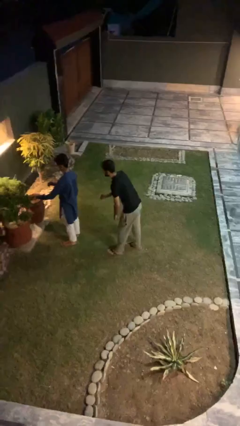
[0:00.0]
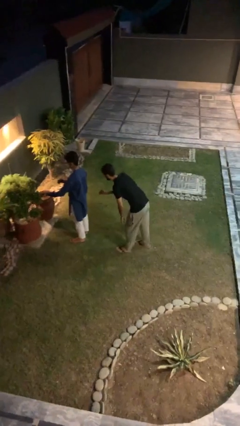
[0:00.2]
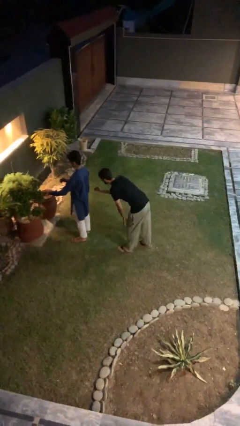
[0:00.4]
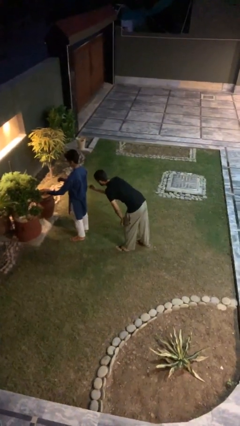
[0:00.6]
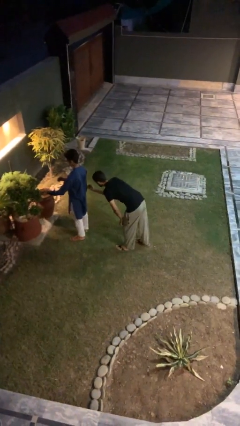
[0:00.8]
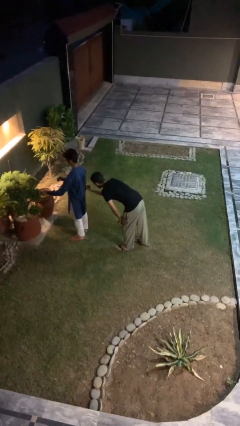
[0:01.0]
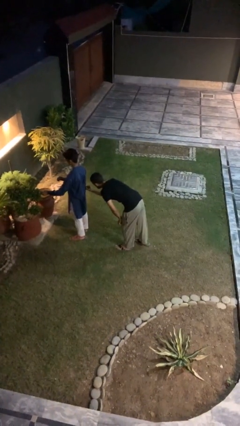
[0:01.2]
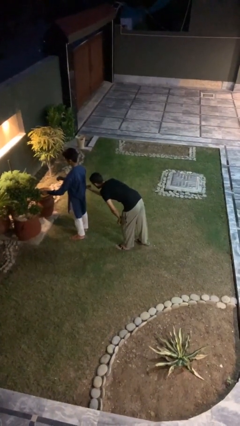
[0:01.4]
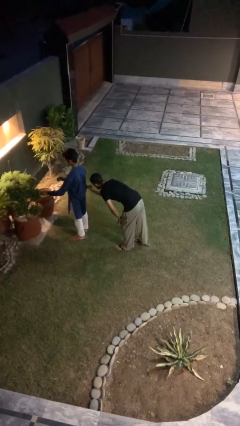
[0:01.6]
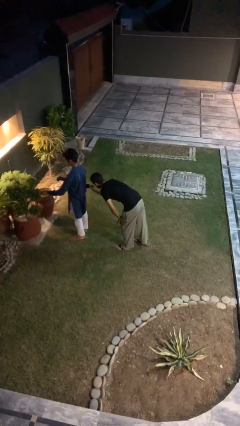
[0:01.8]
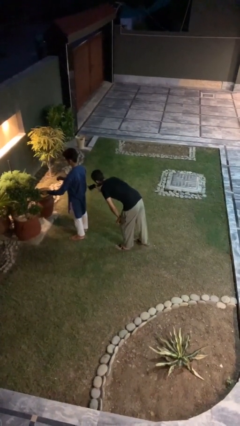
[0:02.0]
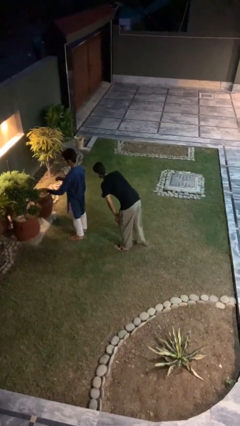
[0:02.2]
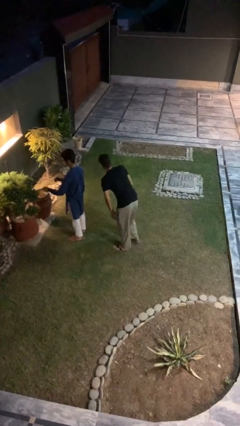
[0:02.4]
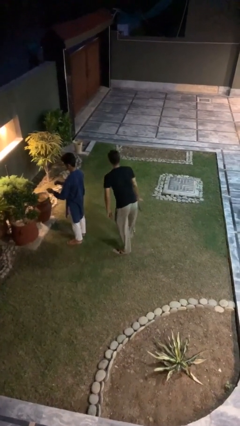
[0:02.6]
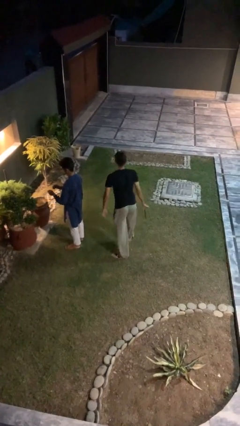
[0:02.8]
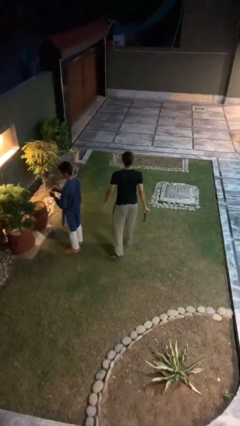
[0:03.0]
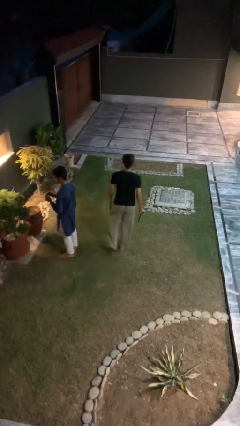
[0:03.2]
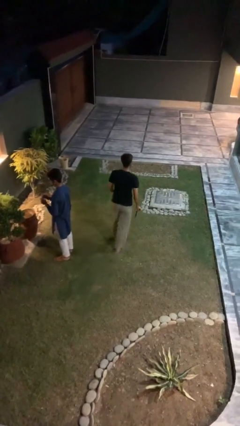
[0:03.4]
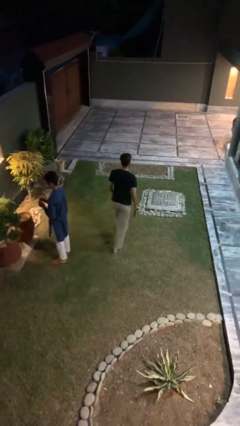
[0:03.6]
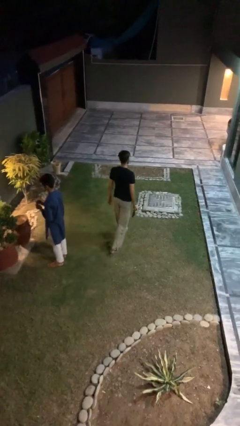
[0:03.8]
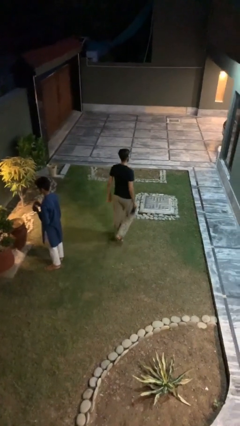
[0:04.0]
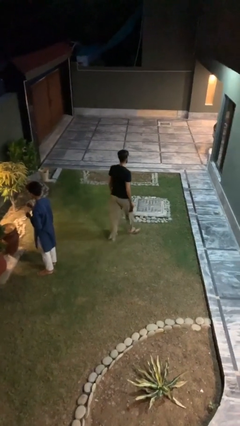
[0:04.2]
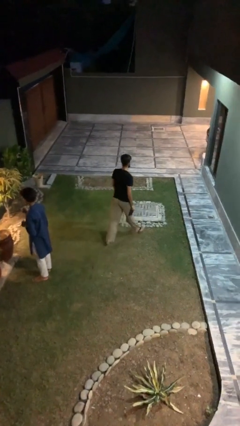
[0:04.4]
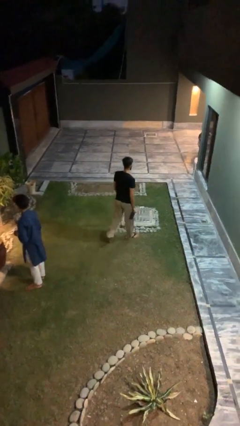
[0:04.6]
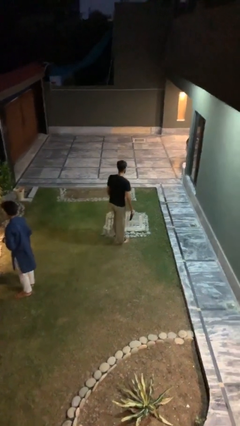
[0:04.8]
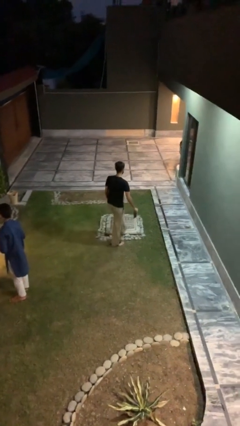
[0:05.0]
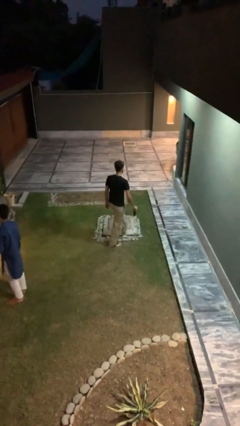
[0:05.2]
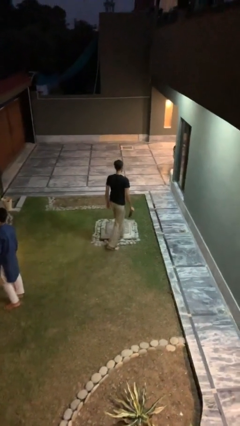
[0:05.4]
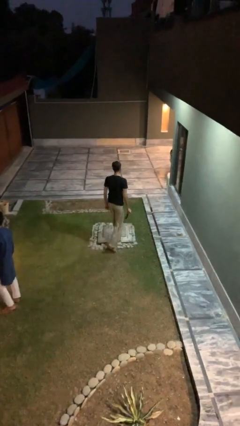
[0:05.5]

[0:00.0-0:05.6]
person steals object from person

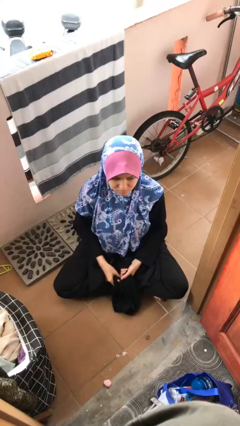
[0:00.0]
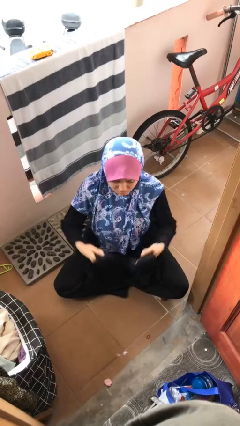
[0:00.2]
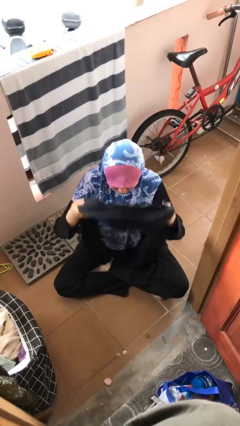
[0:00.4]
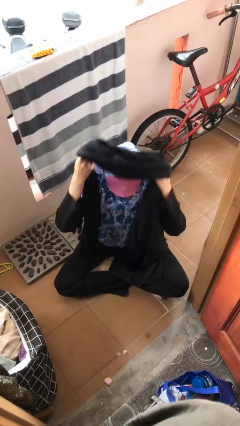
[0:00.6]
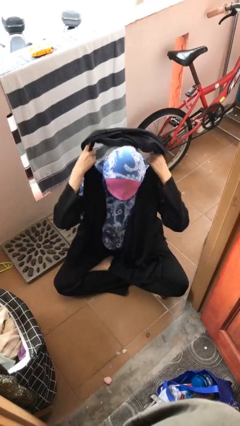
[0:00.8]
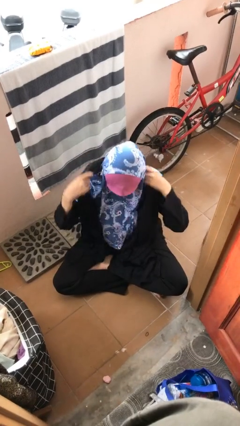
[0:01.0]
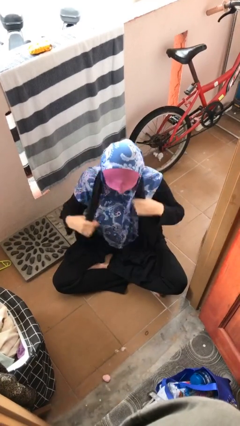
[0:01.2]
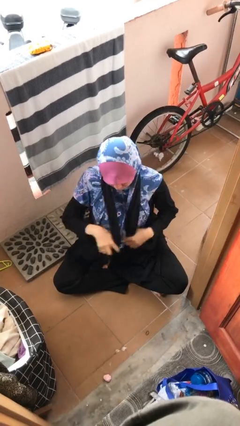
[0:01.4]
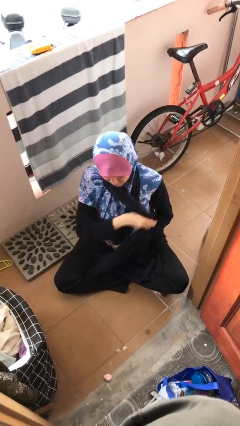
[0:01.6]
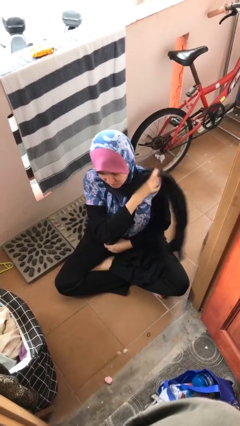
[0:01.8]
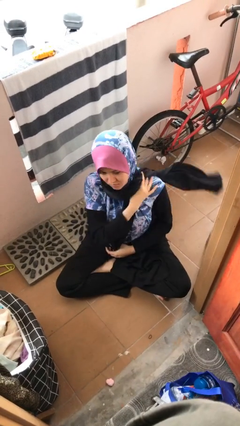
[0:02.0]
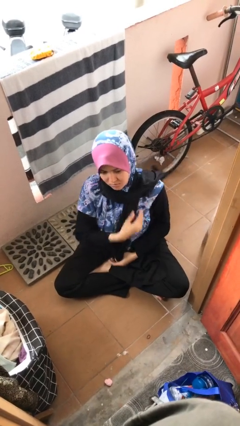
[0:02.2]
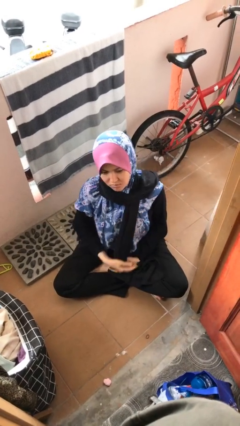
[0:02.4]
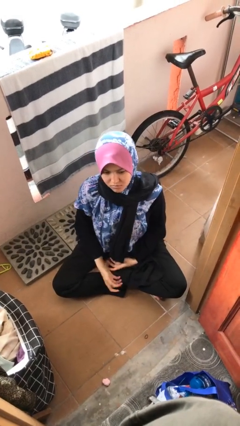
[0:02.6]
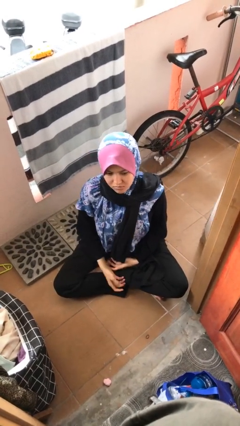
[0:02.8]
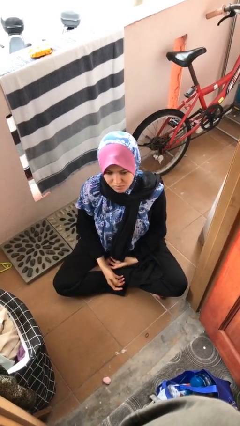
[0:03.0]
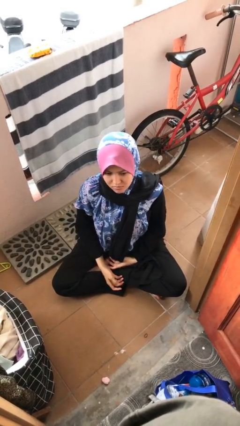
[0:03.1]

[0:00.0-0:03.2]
person puts on scarf

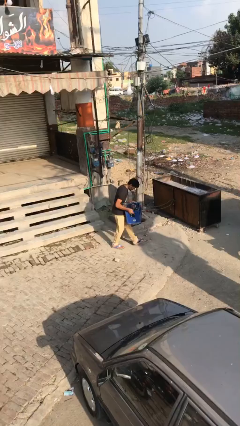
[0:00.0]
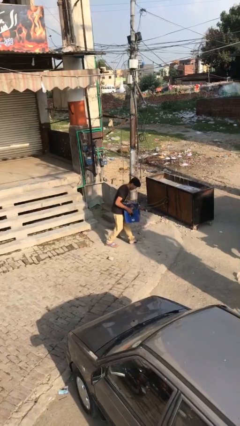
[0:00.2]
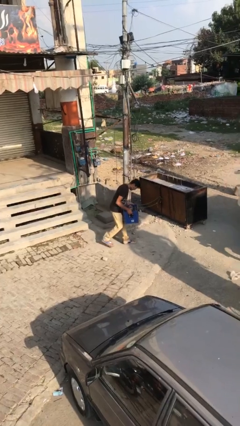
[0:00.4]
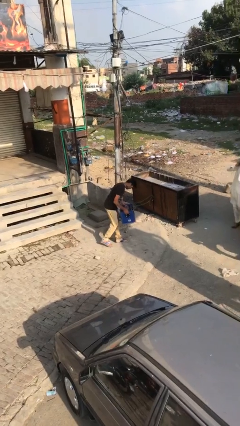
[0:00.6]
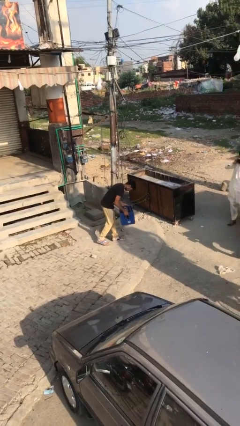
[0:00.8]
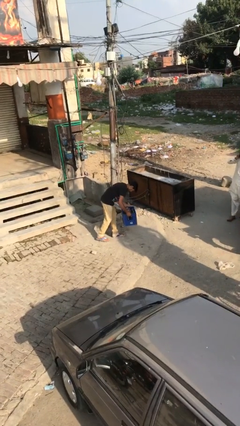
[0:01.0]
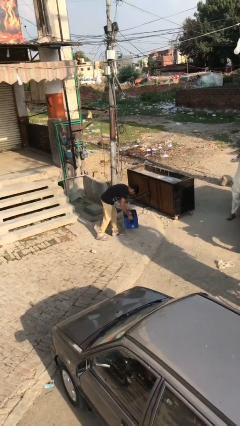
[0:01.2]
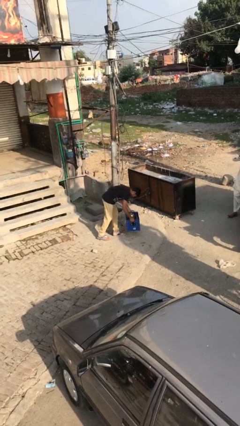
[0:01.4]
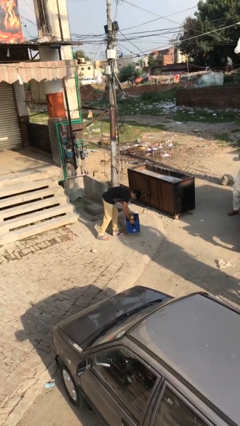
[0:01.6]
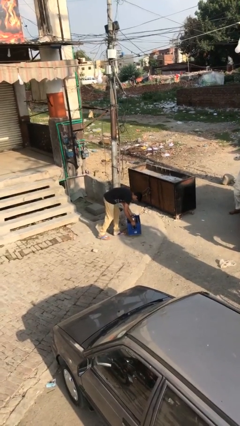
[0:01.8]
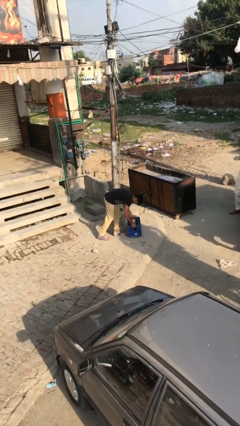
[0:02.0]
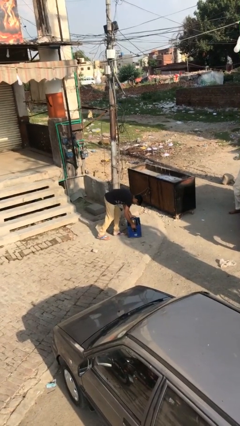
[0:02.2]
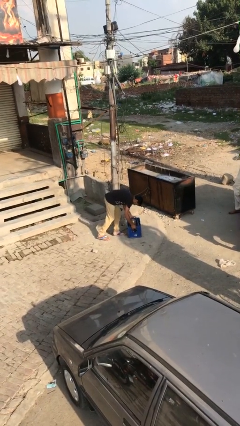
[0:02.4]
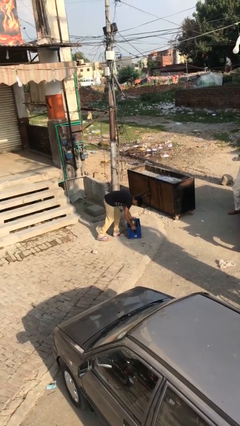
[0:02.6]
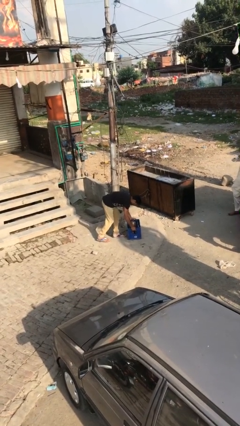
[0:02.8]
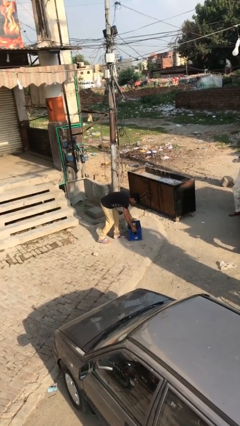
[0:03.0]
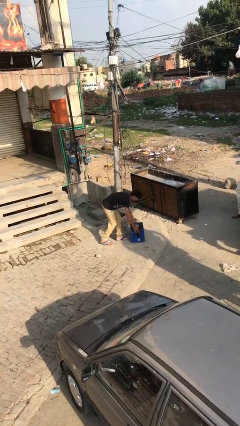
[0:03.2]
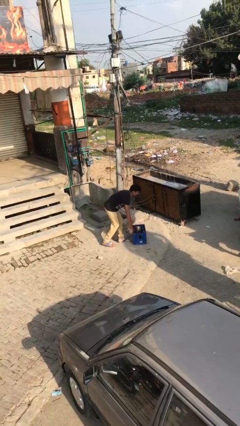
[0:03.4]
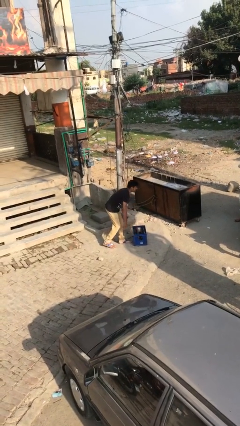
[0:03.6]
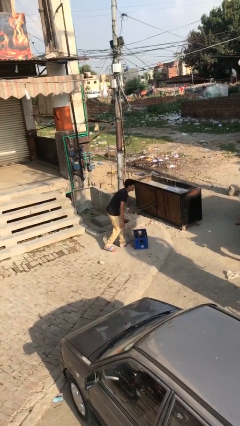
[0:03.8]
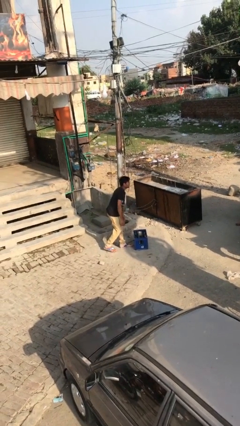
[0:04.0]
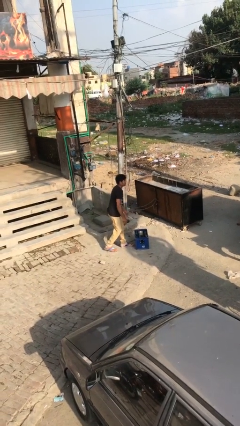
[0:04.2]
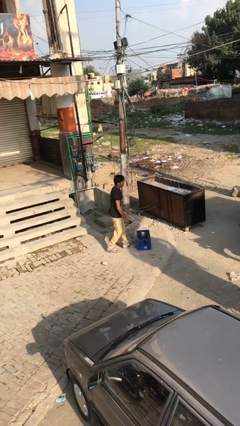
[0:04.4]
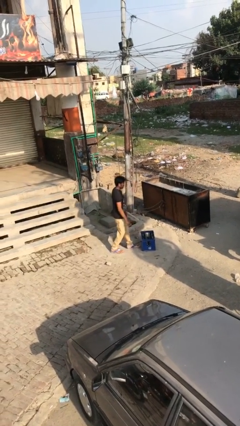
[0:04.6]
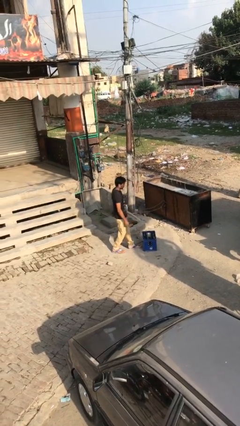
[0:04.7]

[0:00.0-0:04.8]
person puts down object on floor

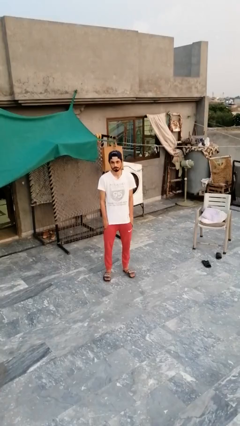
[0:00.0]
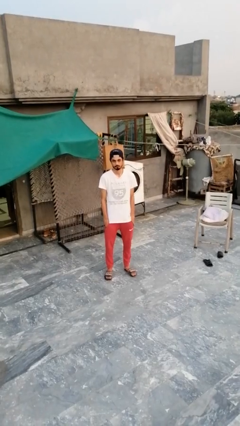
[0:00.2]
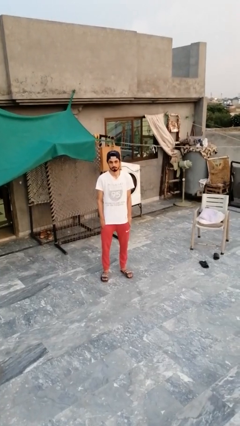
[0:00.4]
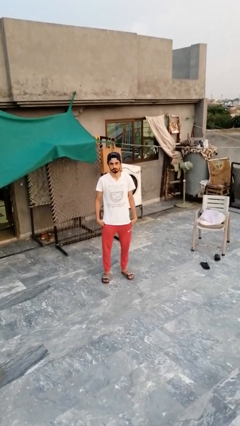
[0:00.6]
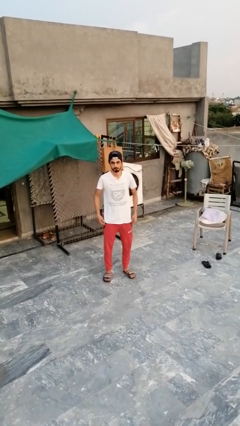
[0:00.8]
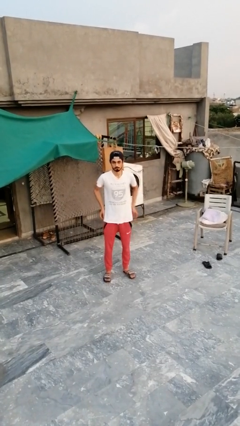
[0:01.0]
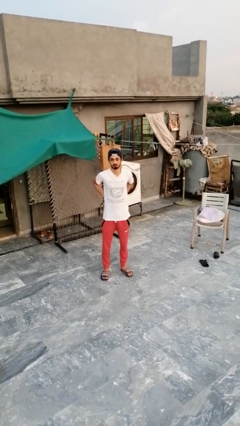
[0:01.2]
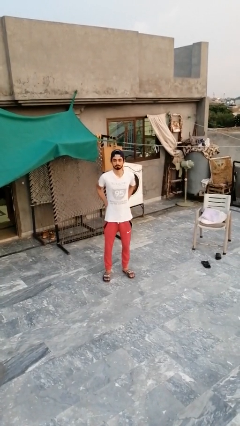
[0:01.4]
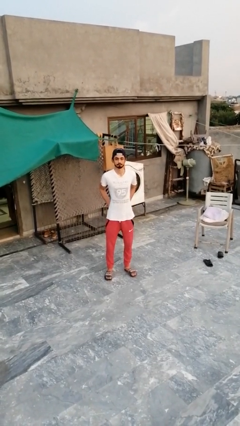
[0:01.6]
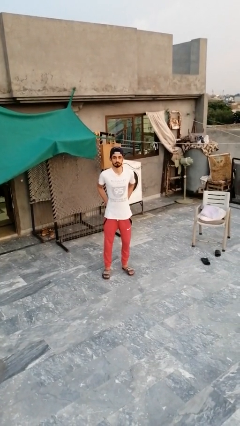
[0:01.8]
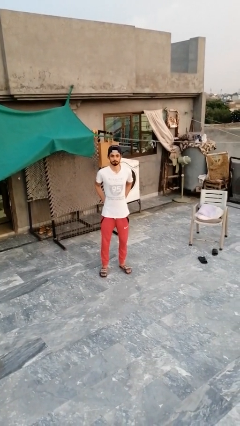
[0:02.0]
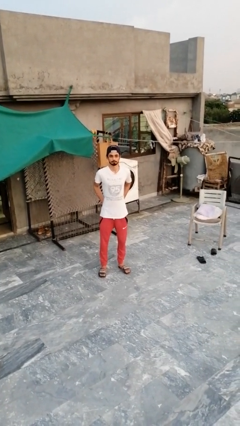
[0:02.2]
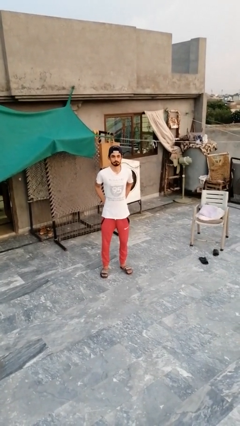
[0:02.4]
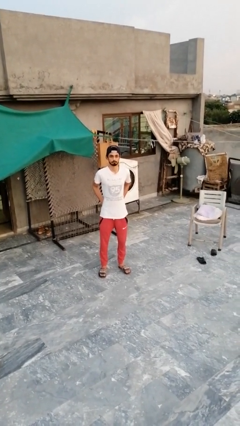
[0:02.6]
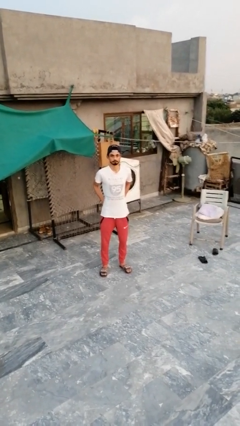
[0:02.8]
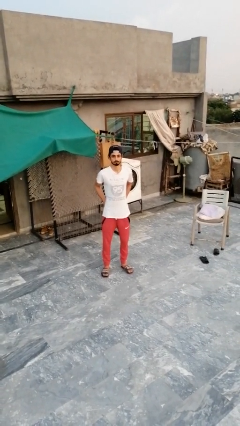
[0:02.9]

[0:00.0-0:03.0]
person puts hands in back pockets

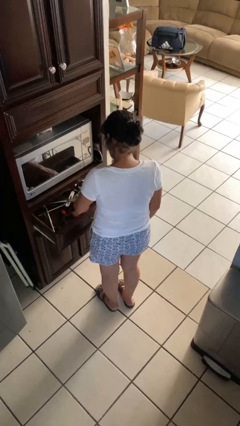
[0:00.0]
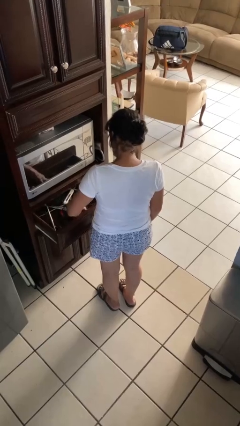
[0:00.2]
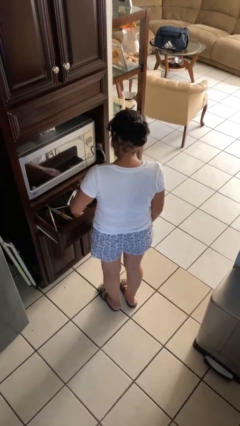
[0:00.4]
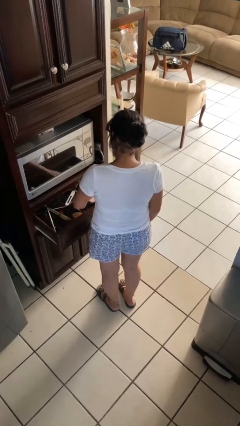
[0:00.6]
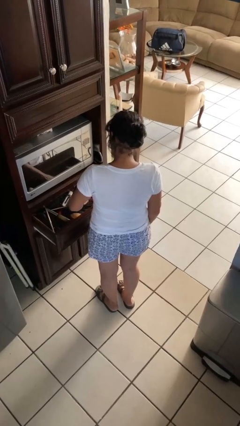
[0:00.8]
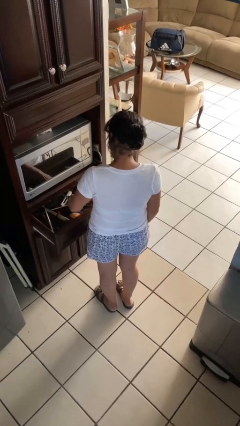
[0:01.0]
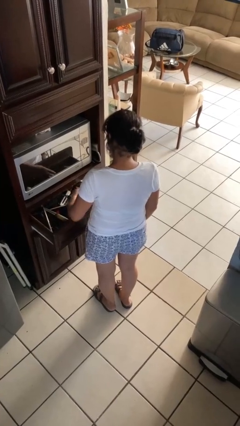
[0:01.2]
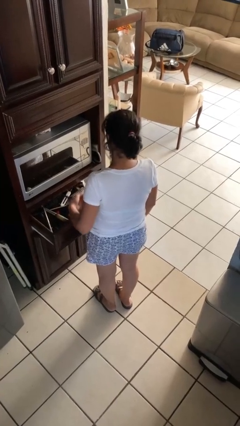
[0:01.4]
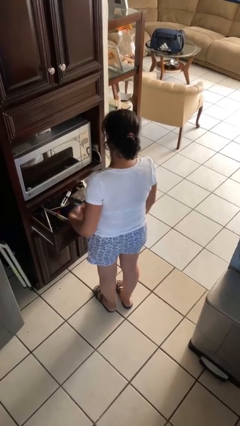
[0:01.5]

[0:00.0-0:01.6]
person searches in kitchen drawer
